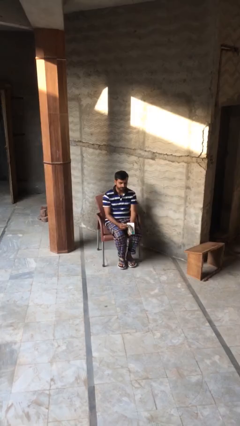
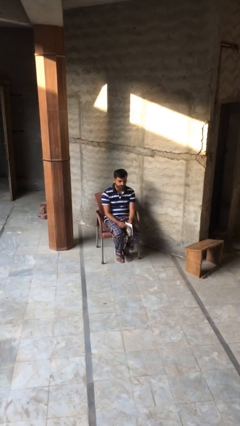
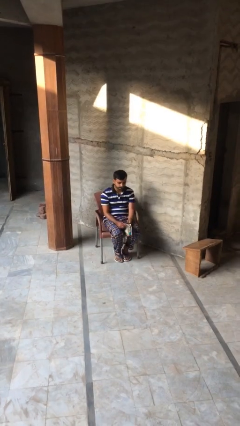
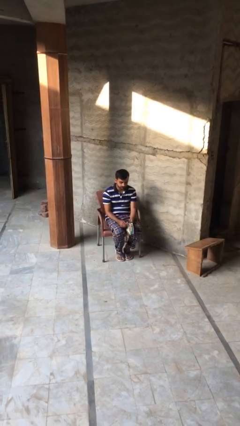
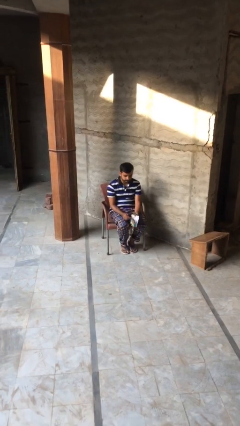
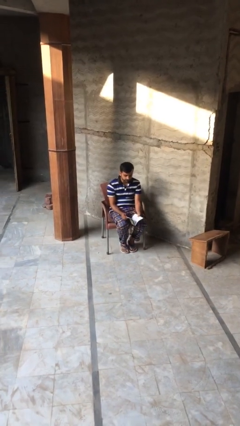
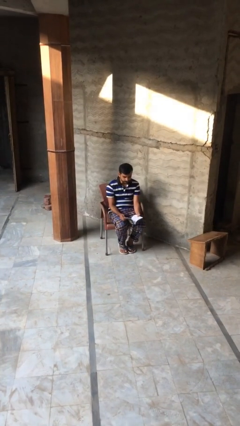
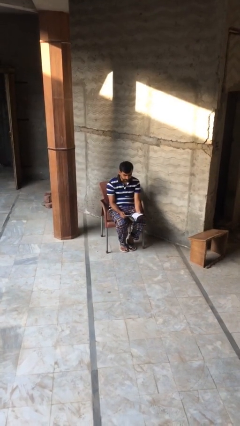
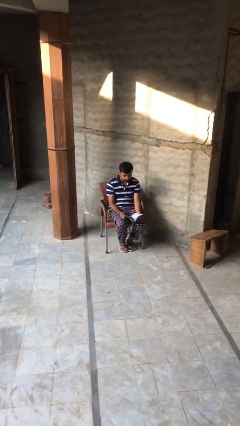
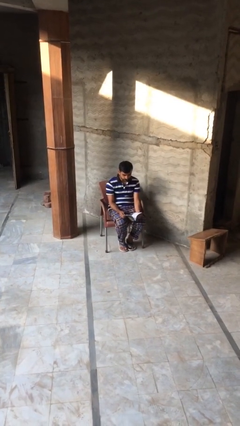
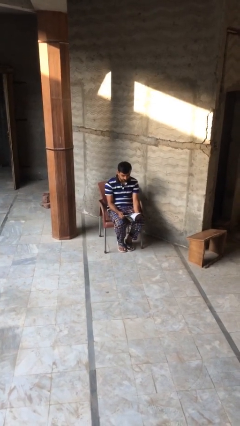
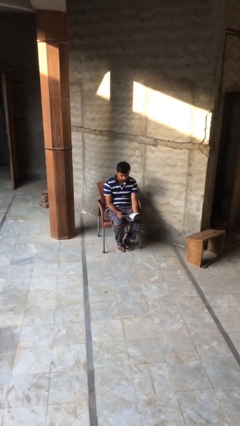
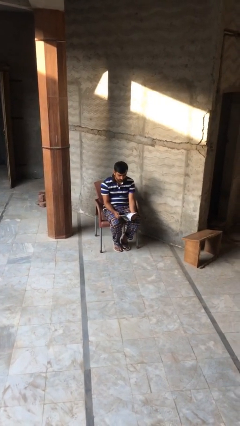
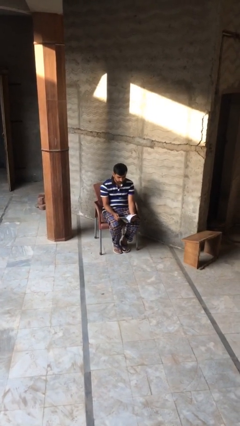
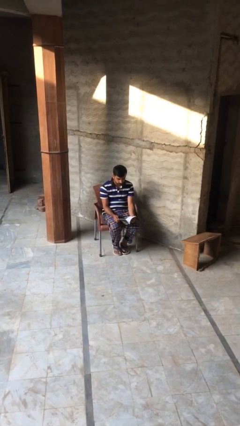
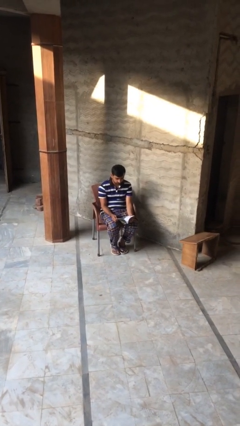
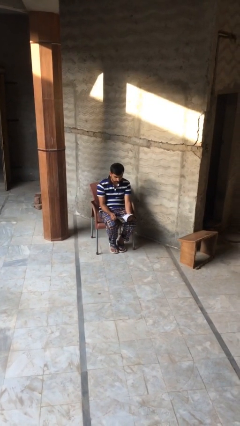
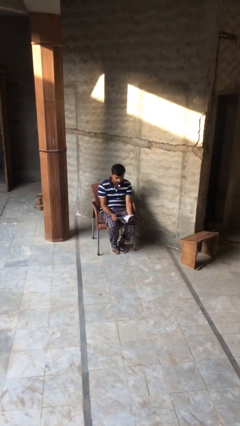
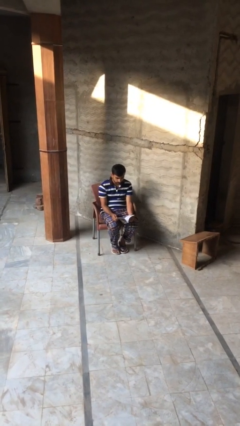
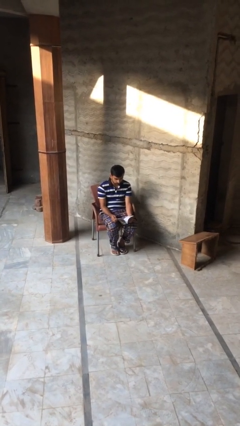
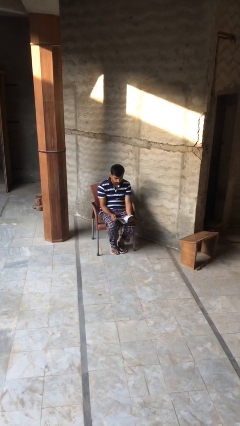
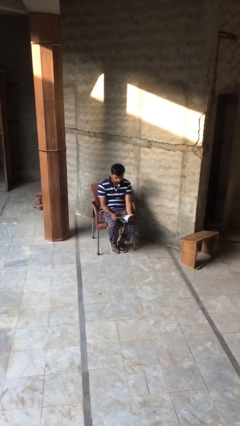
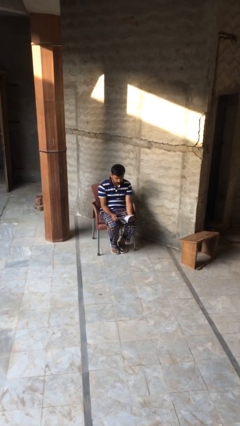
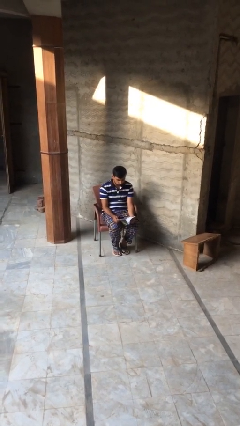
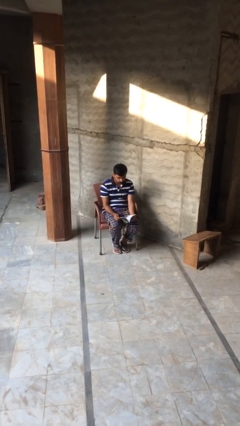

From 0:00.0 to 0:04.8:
person reads document

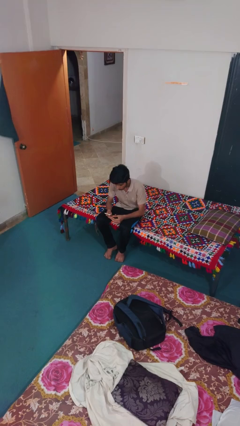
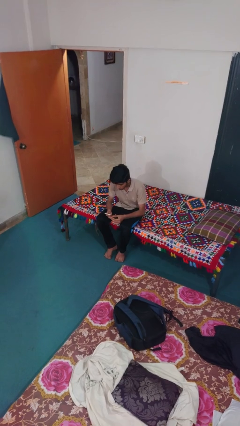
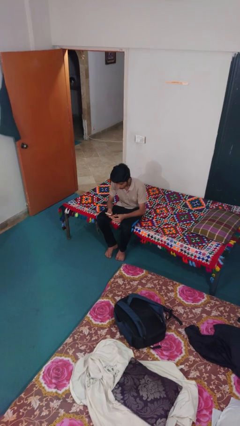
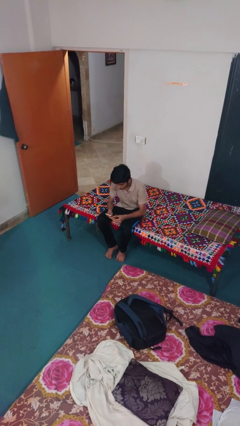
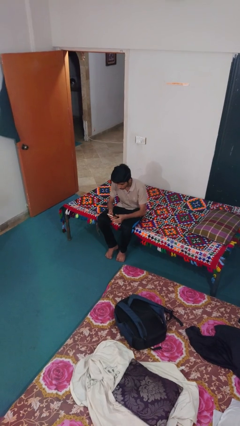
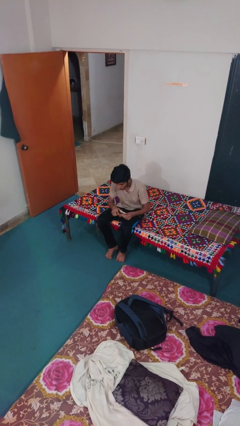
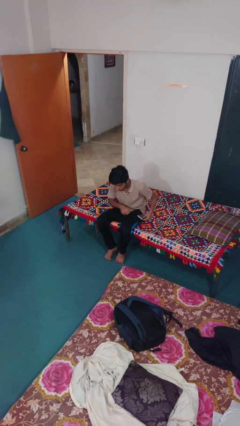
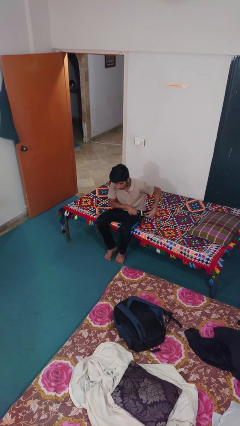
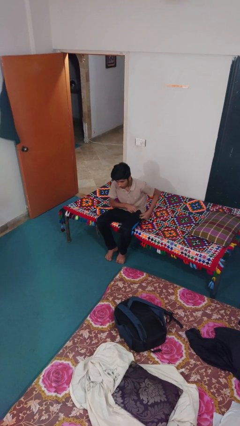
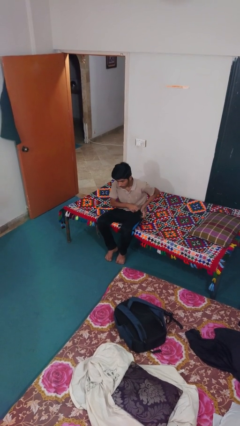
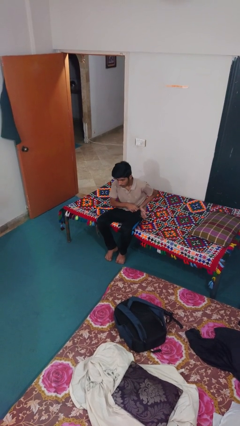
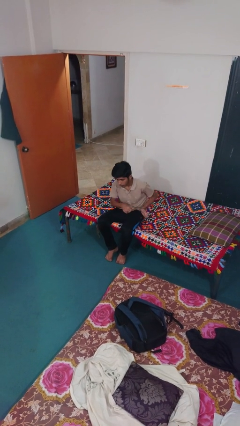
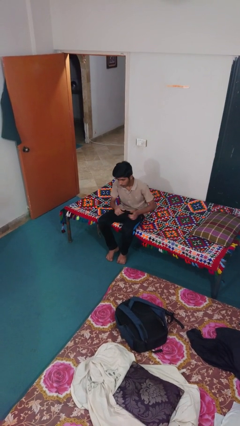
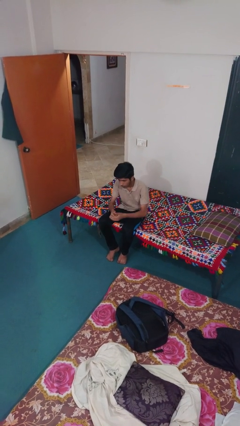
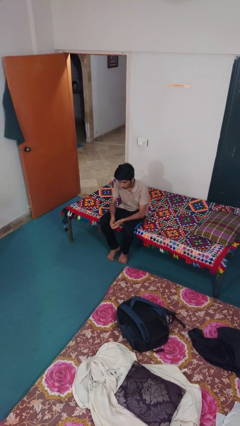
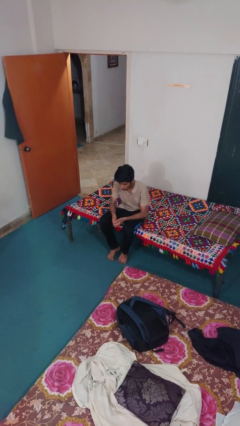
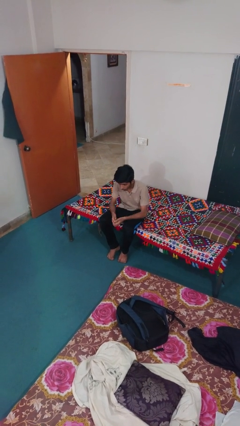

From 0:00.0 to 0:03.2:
person puts phone into pocket

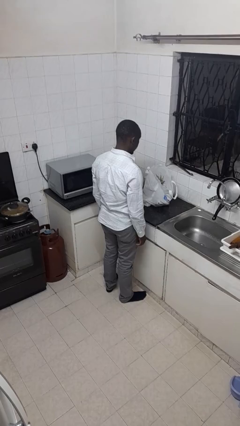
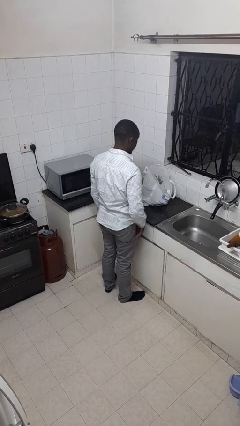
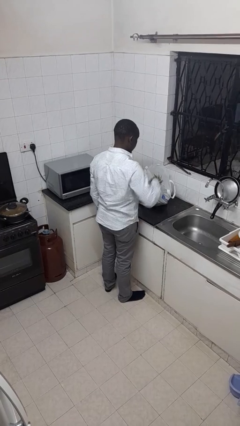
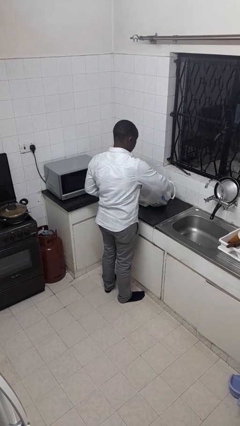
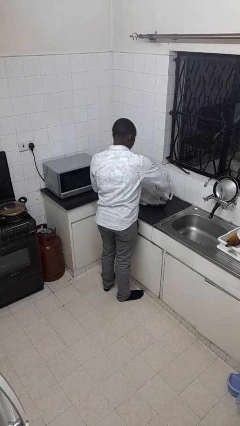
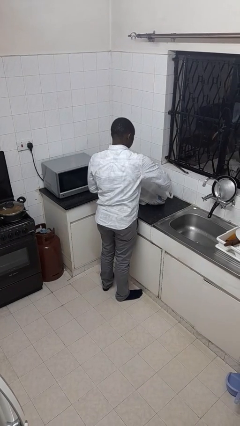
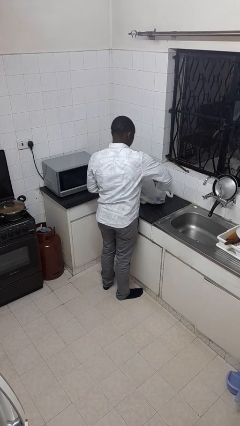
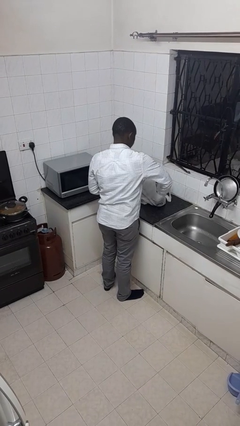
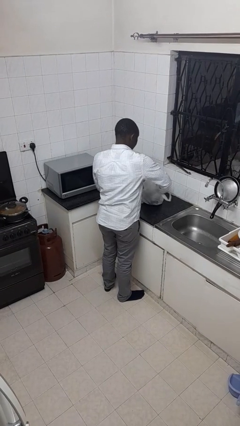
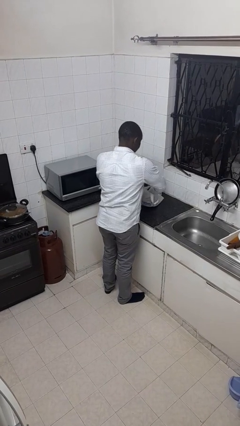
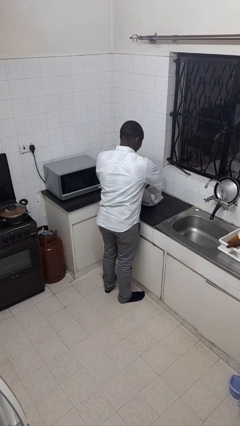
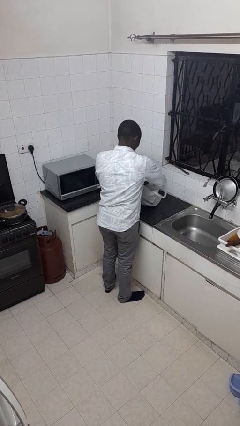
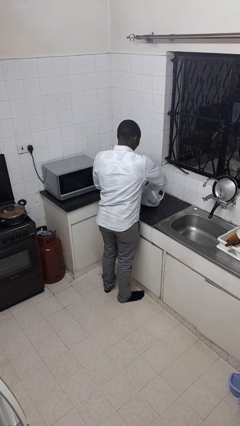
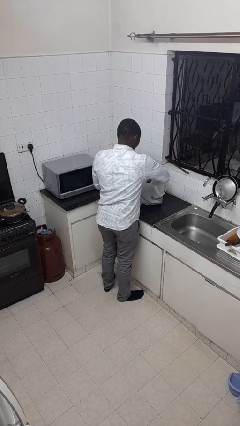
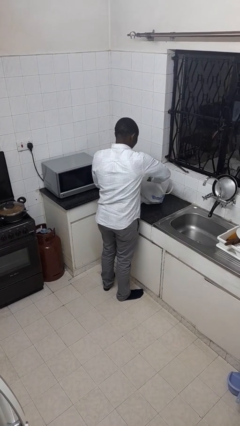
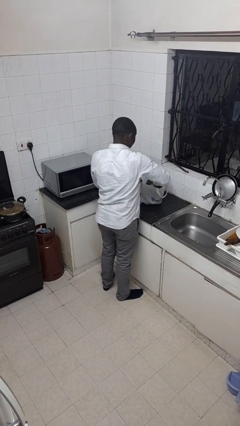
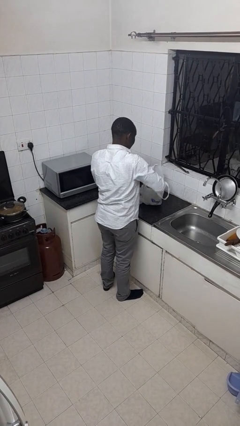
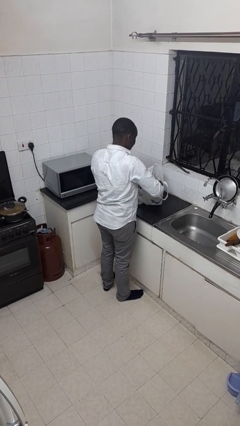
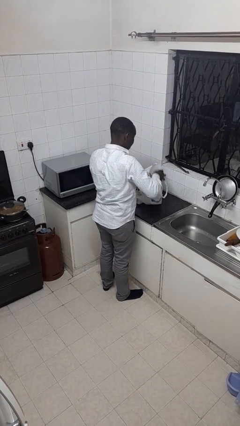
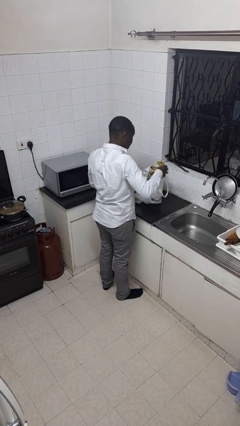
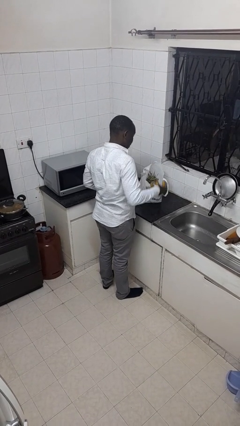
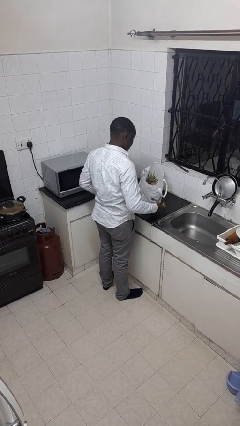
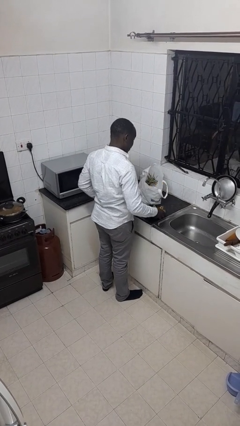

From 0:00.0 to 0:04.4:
person takes object from bag

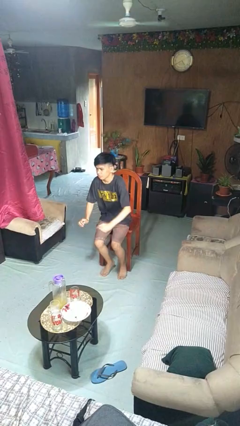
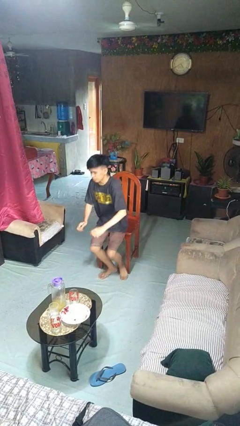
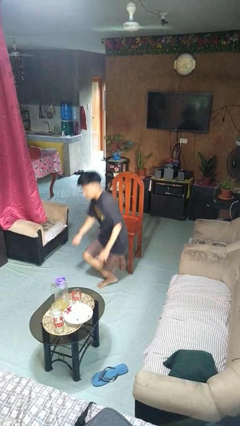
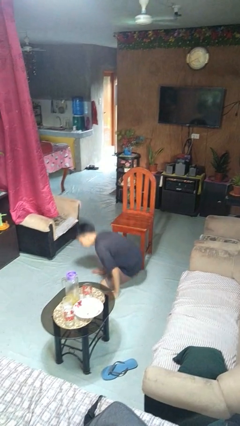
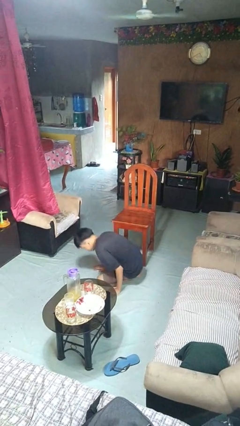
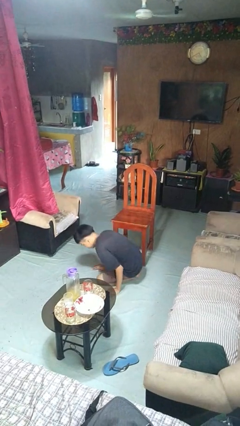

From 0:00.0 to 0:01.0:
person falls from chair

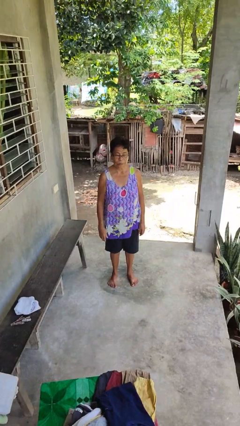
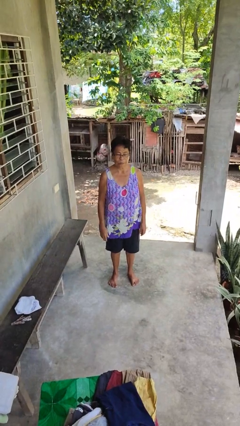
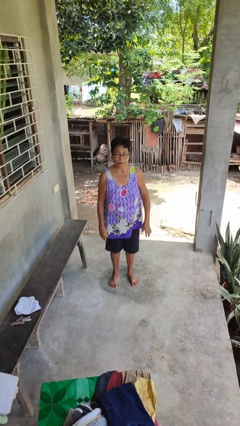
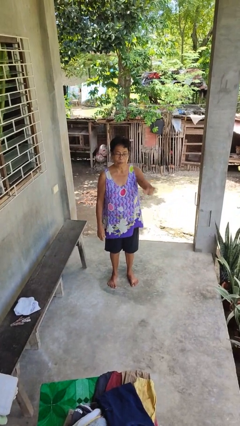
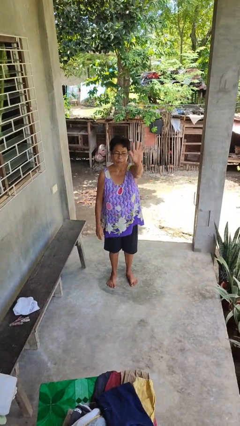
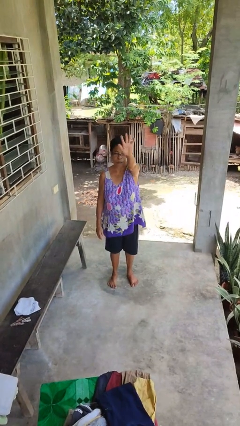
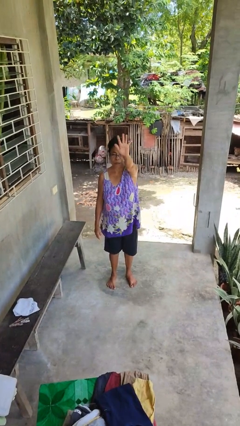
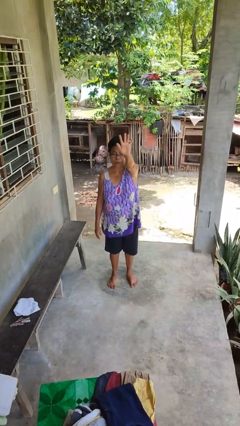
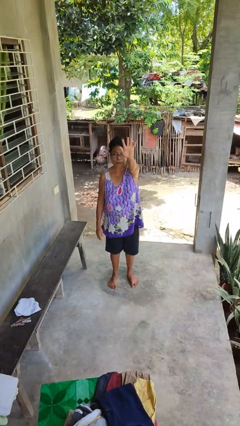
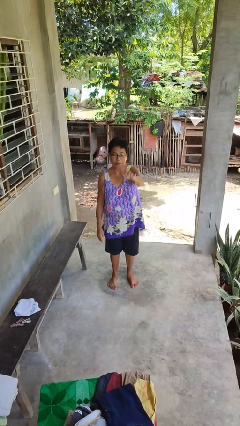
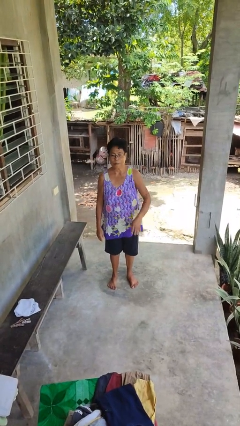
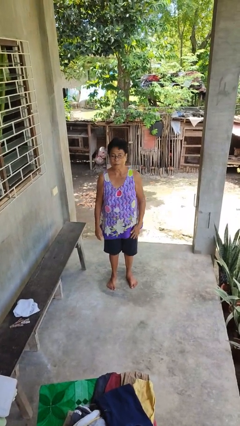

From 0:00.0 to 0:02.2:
person gestures stop

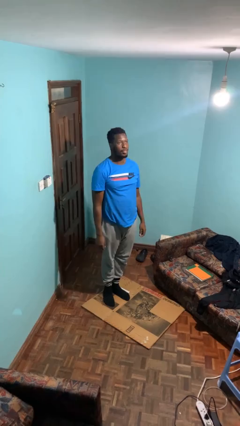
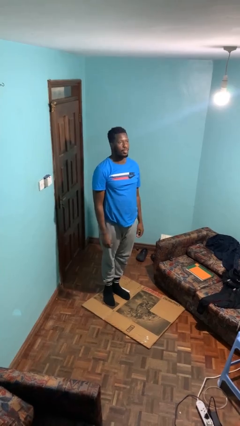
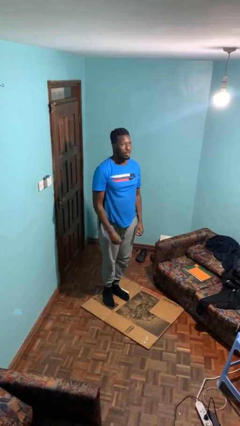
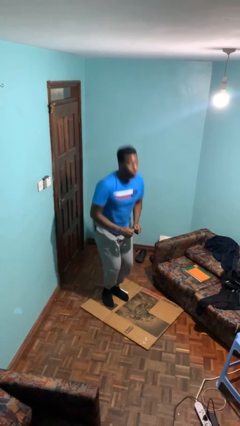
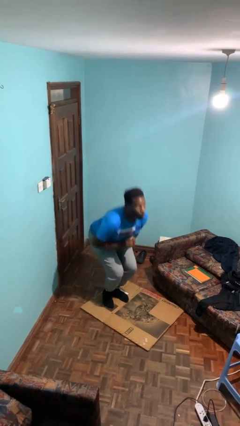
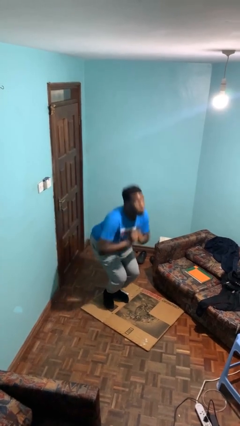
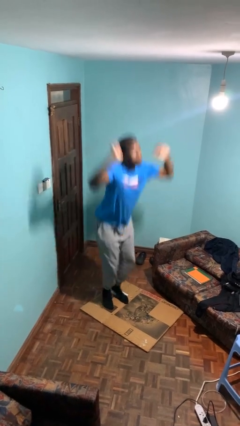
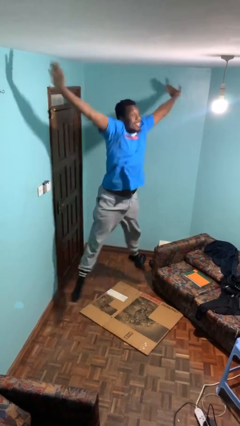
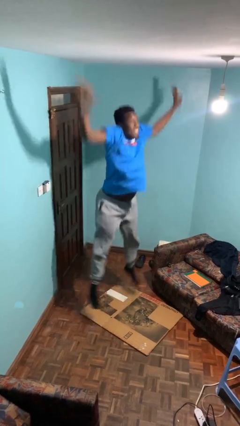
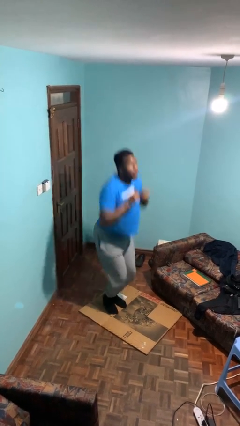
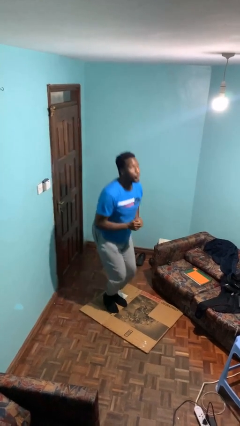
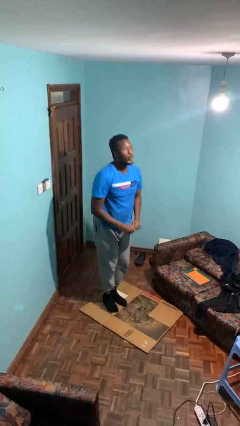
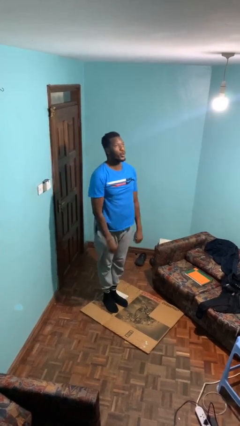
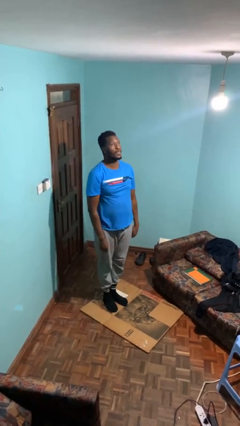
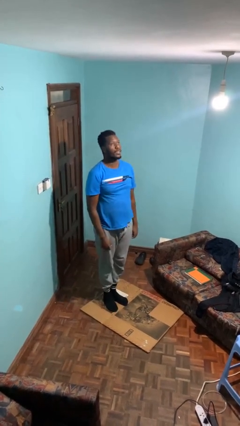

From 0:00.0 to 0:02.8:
person exercises with jumping jacks
